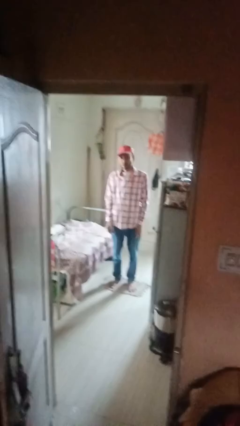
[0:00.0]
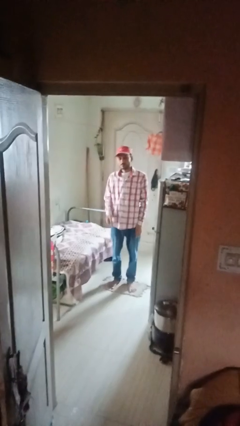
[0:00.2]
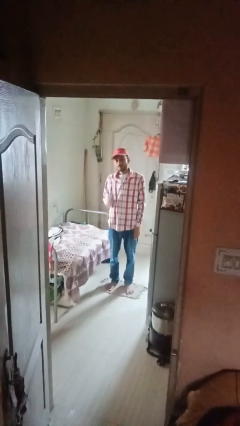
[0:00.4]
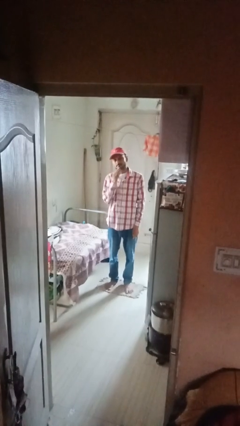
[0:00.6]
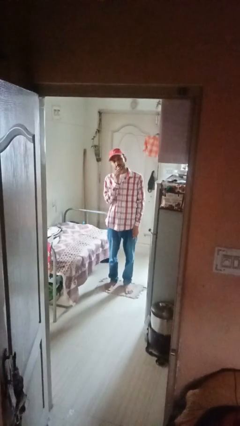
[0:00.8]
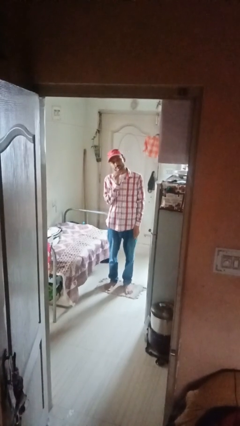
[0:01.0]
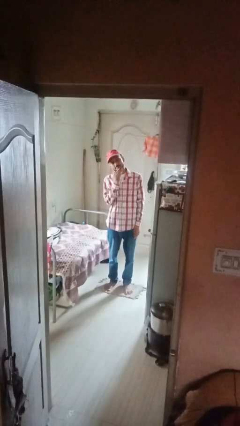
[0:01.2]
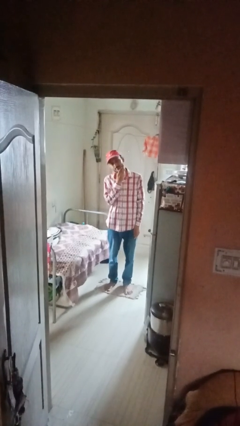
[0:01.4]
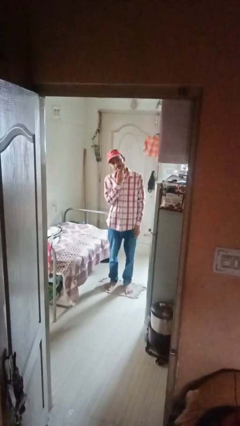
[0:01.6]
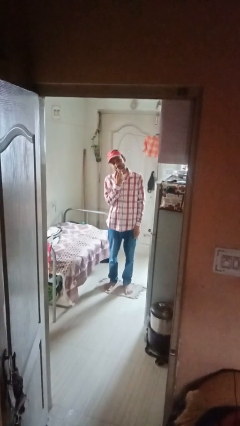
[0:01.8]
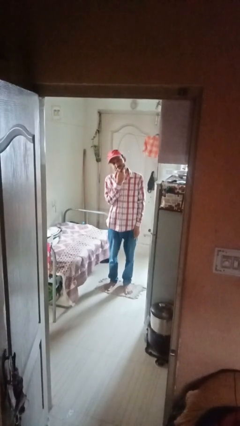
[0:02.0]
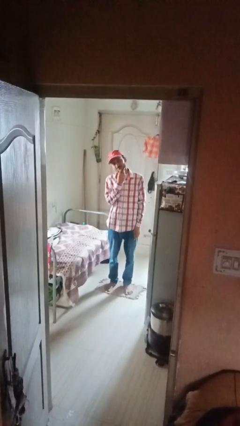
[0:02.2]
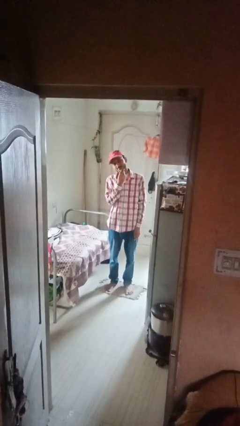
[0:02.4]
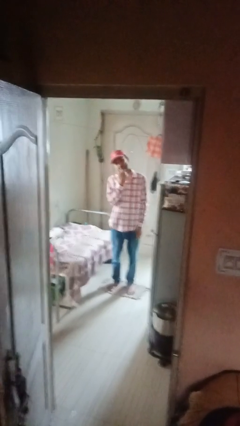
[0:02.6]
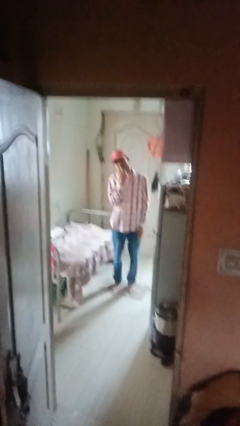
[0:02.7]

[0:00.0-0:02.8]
person strokes chin

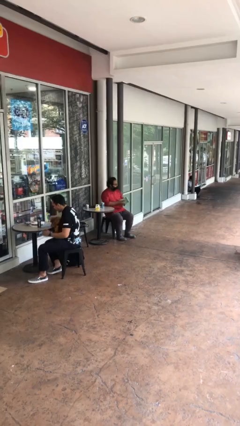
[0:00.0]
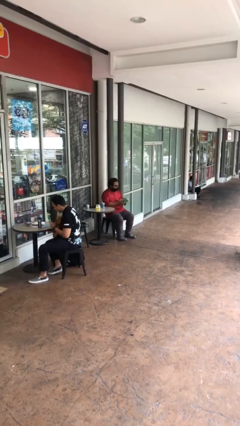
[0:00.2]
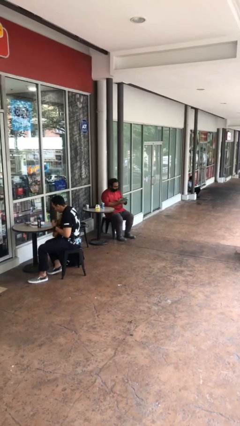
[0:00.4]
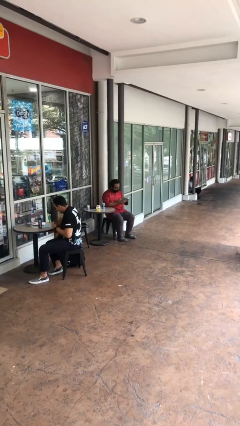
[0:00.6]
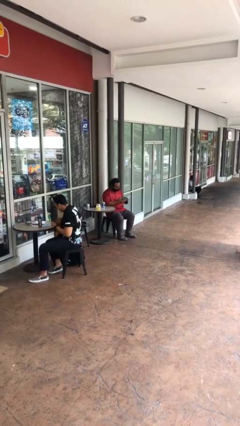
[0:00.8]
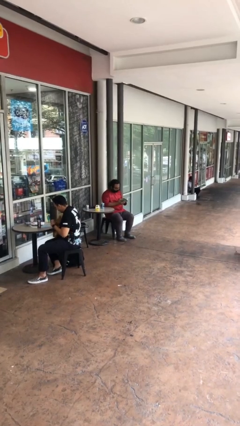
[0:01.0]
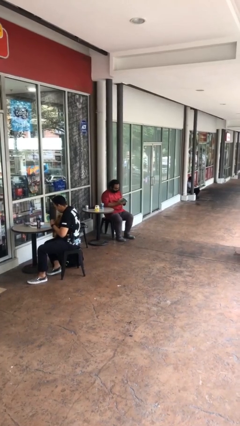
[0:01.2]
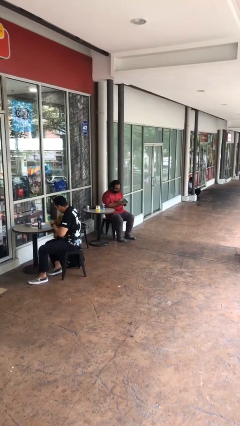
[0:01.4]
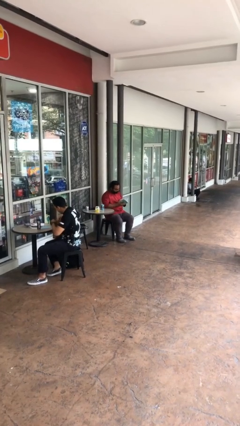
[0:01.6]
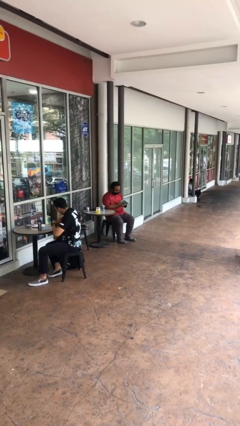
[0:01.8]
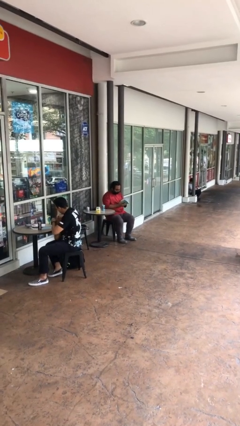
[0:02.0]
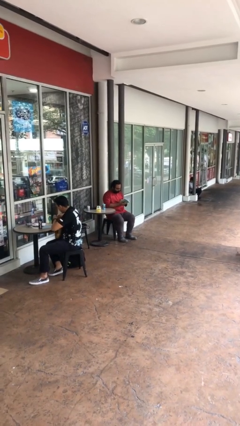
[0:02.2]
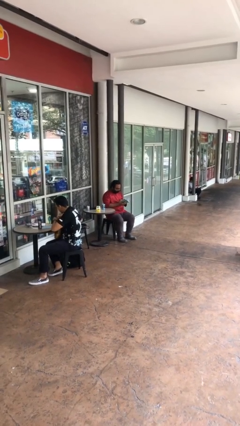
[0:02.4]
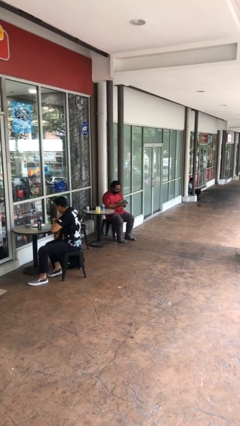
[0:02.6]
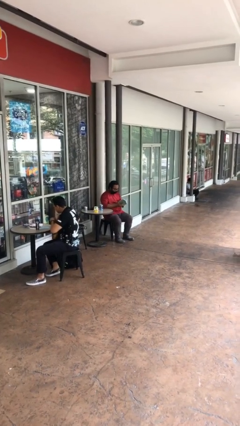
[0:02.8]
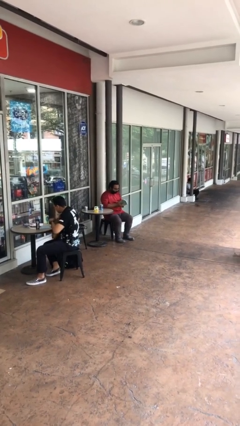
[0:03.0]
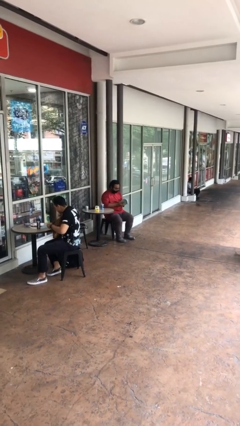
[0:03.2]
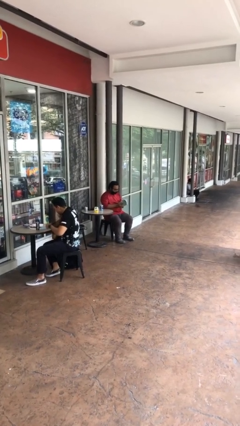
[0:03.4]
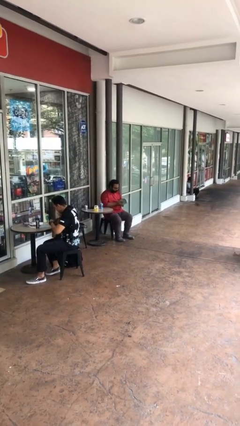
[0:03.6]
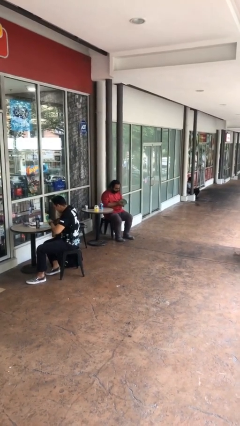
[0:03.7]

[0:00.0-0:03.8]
person reads document

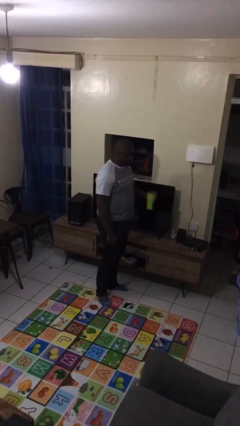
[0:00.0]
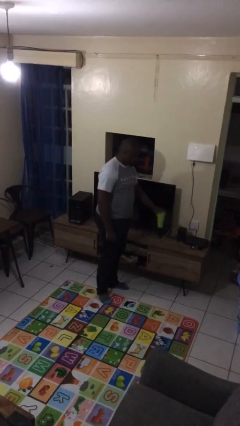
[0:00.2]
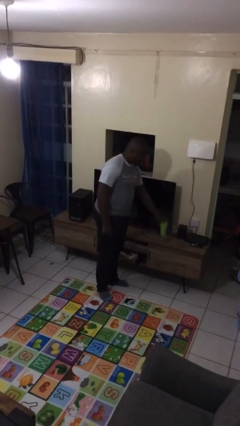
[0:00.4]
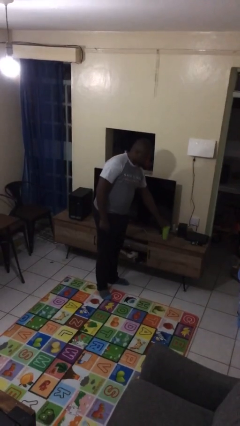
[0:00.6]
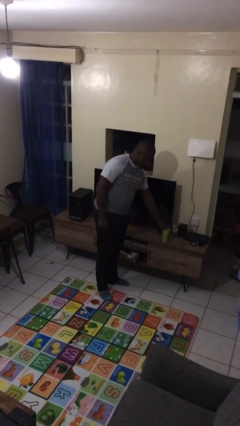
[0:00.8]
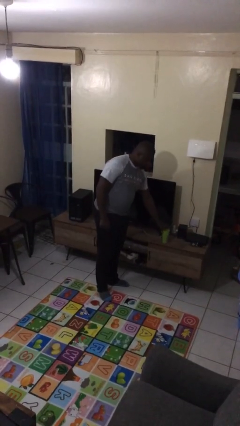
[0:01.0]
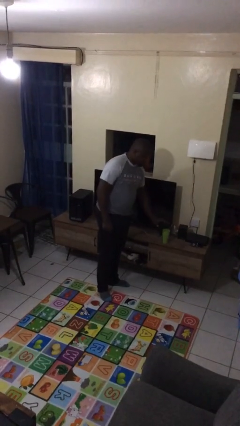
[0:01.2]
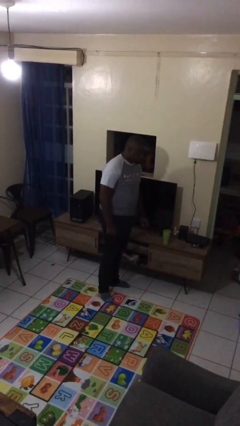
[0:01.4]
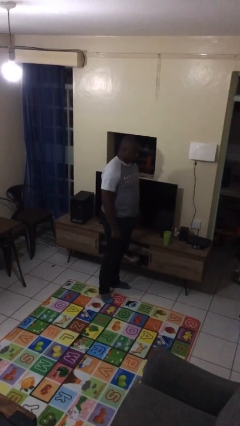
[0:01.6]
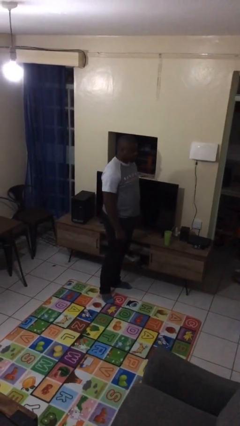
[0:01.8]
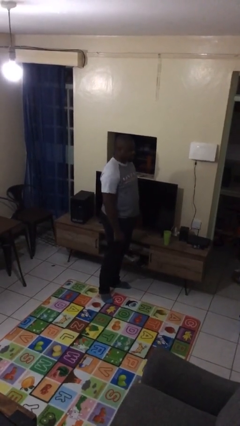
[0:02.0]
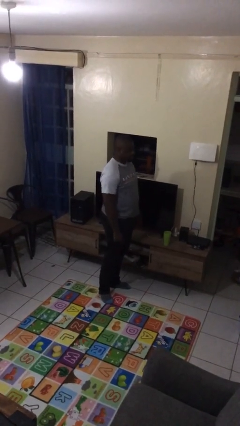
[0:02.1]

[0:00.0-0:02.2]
person puts down object on countertop

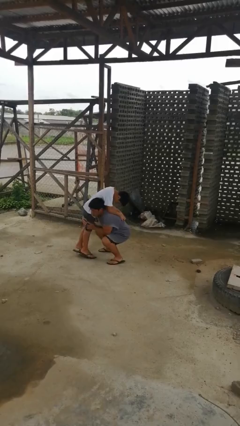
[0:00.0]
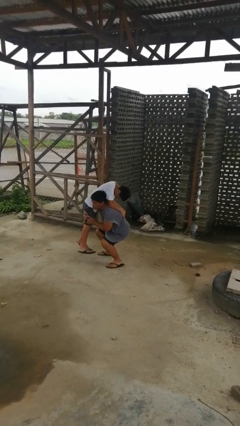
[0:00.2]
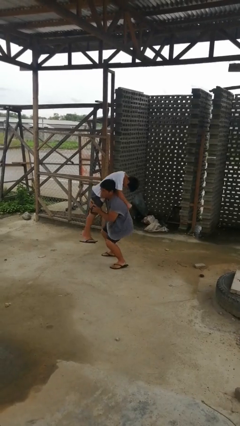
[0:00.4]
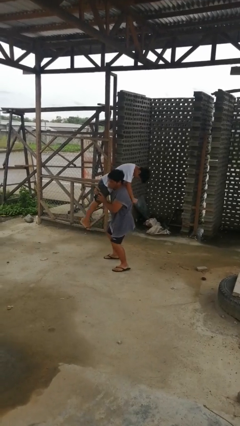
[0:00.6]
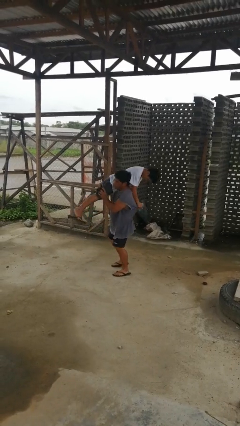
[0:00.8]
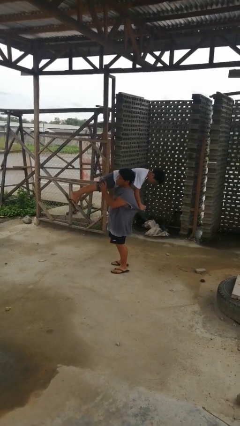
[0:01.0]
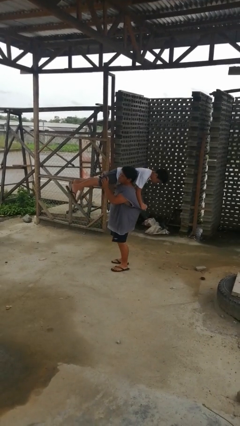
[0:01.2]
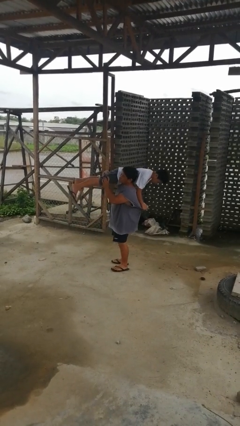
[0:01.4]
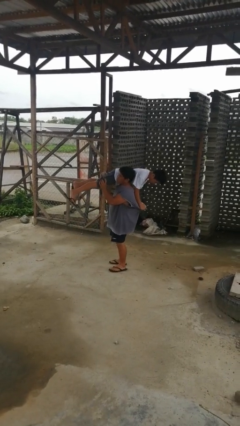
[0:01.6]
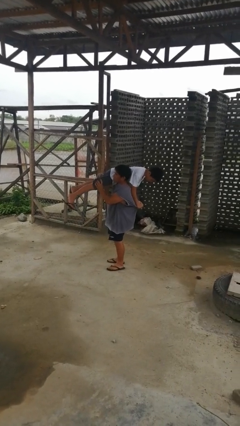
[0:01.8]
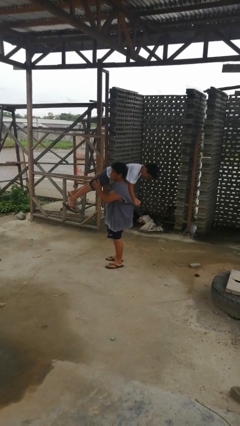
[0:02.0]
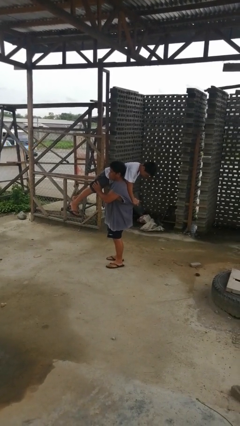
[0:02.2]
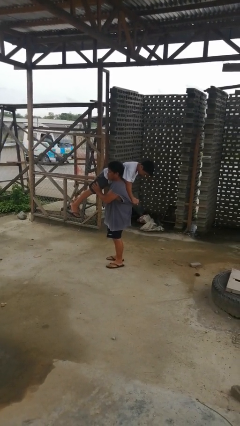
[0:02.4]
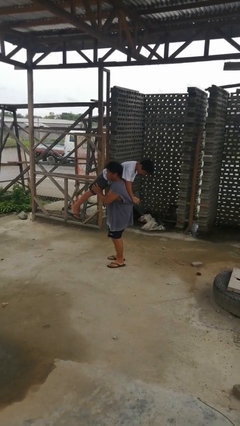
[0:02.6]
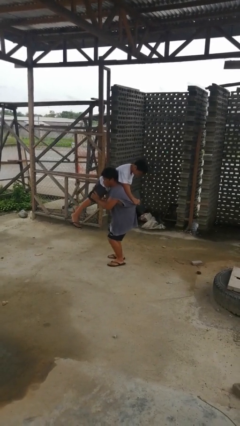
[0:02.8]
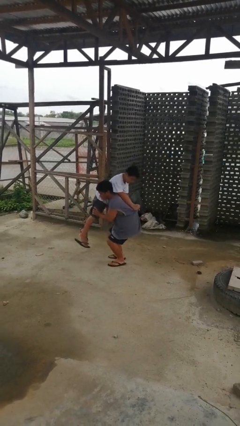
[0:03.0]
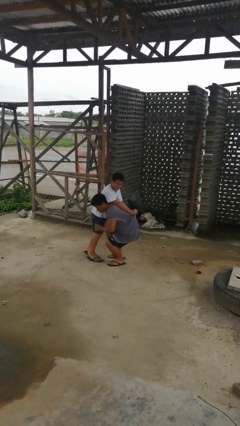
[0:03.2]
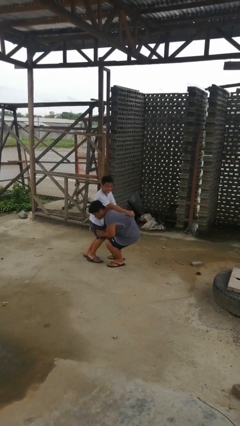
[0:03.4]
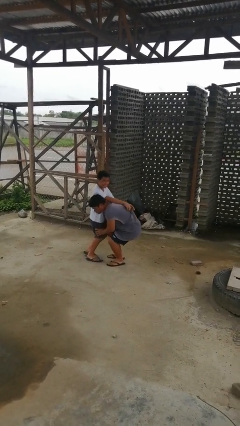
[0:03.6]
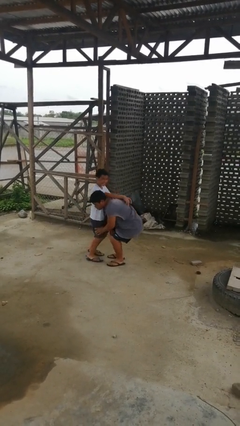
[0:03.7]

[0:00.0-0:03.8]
person carries person over shoulder

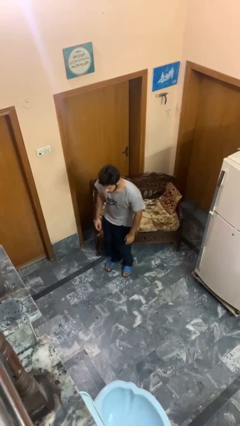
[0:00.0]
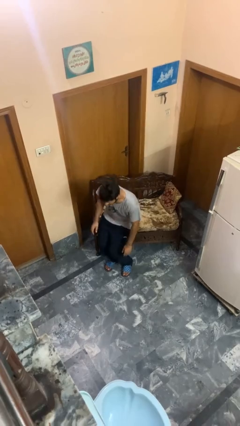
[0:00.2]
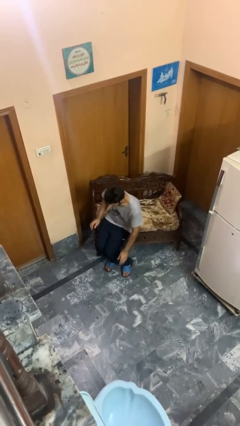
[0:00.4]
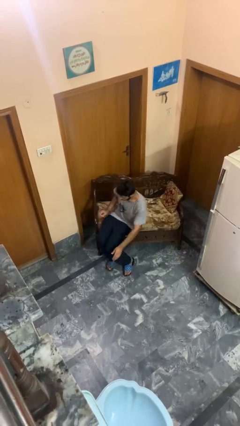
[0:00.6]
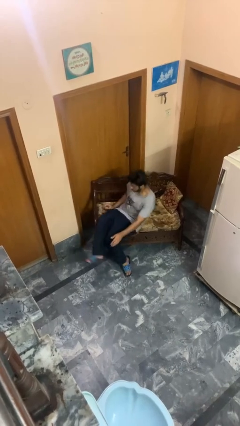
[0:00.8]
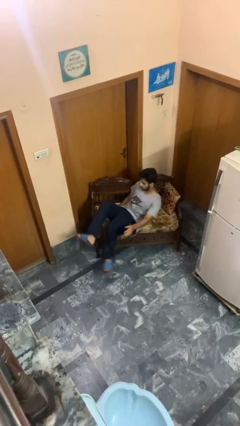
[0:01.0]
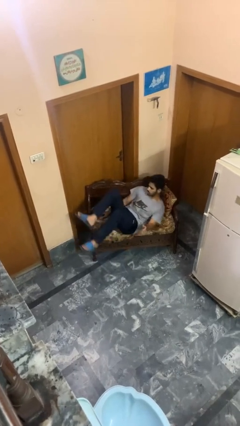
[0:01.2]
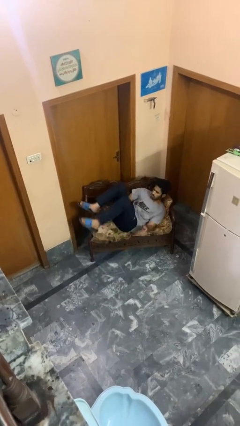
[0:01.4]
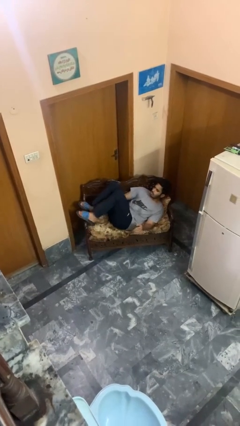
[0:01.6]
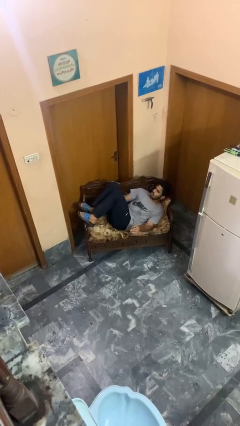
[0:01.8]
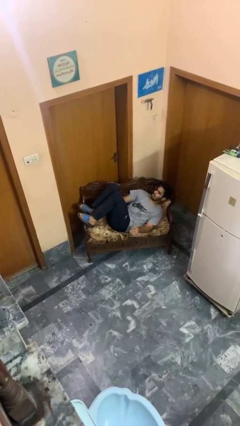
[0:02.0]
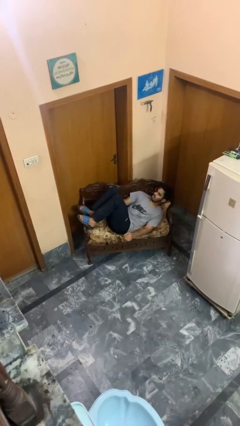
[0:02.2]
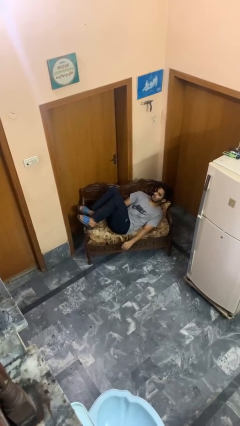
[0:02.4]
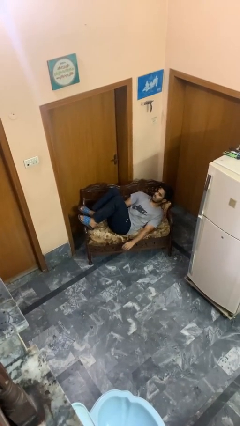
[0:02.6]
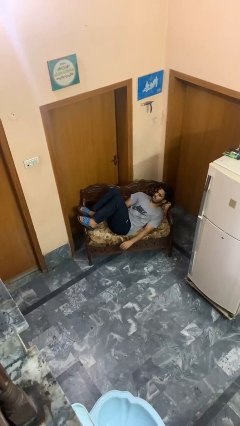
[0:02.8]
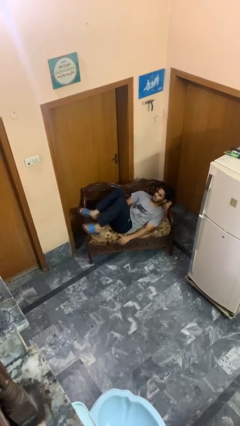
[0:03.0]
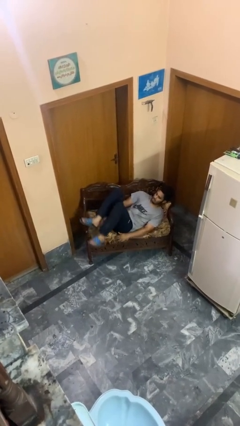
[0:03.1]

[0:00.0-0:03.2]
person lies down on couch

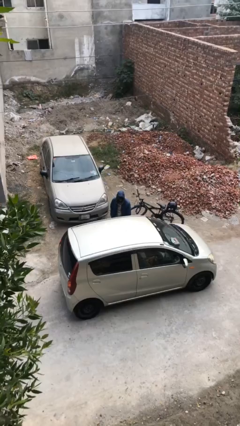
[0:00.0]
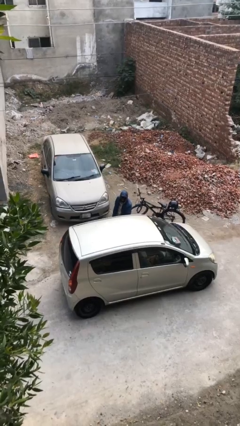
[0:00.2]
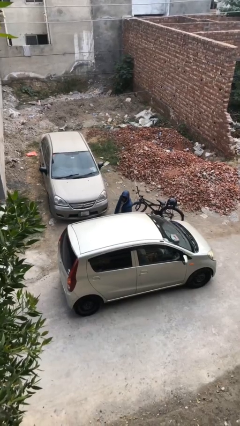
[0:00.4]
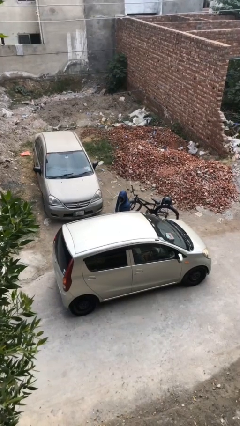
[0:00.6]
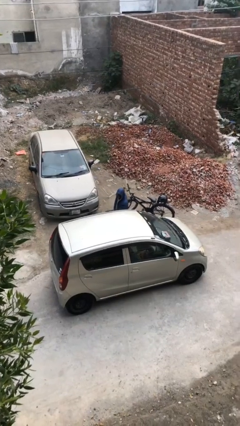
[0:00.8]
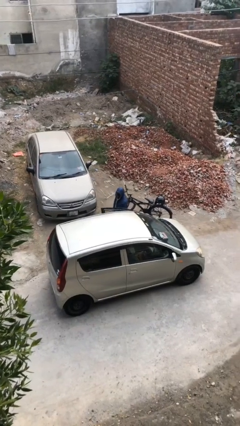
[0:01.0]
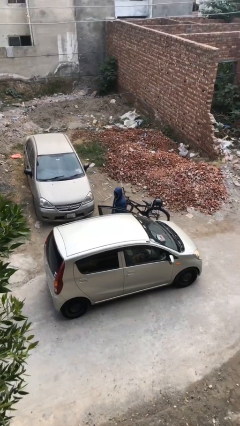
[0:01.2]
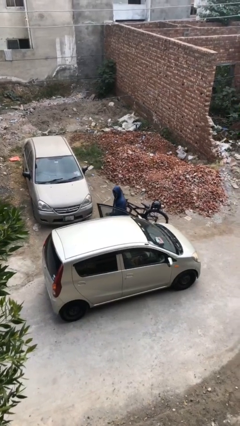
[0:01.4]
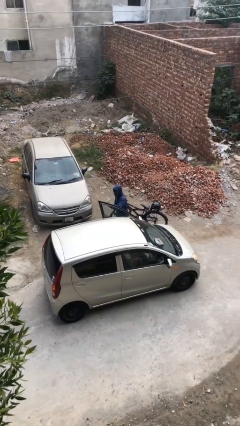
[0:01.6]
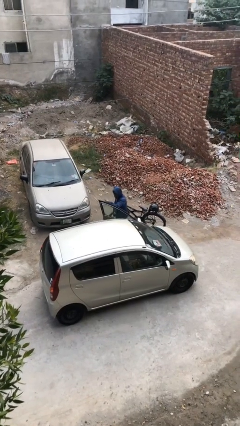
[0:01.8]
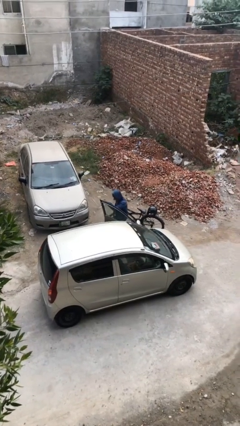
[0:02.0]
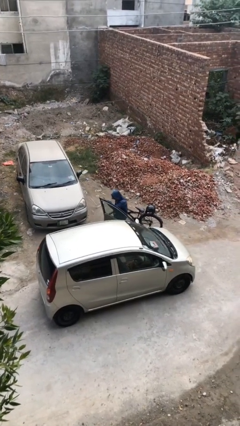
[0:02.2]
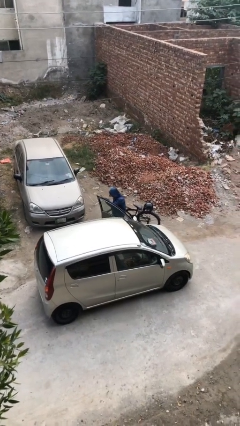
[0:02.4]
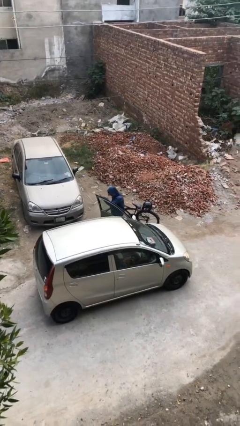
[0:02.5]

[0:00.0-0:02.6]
person opens car door
